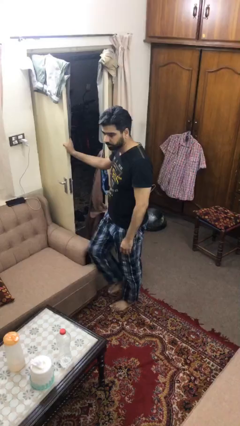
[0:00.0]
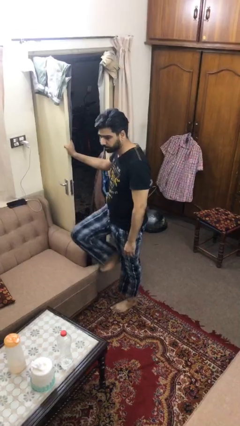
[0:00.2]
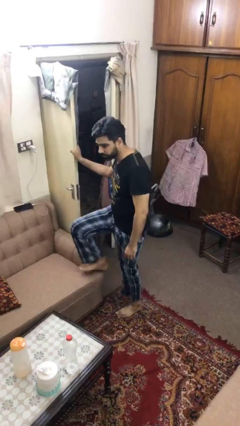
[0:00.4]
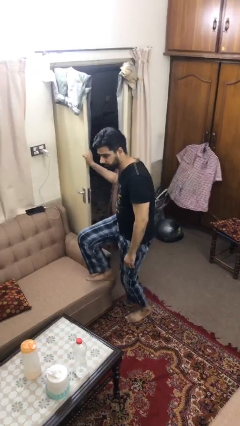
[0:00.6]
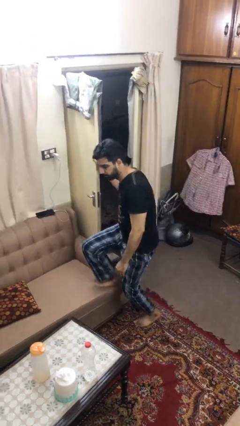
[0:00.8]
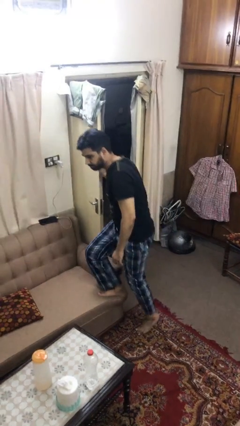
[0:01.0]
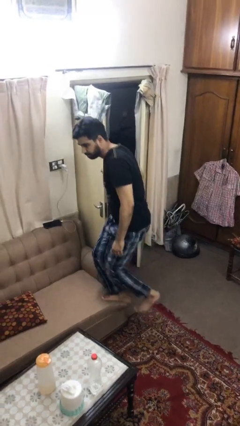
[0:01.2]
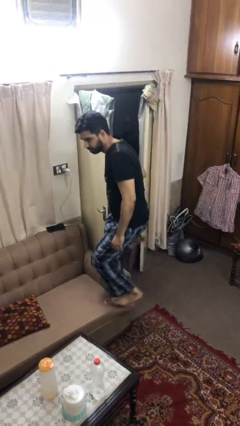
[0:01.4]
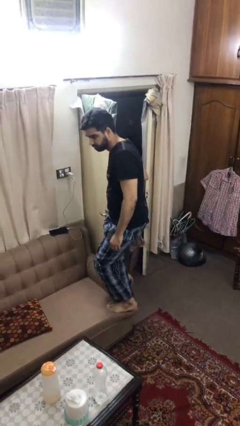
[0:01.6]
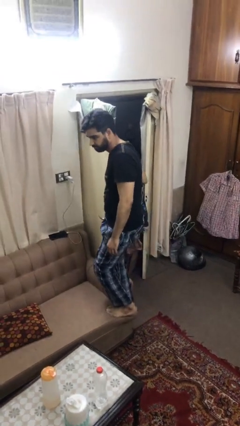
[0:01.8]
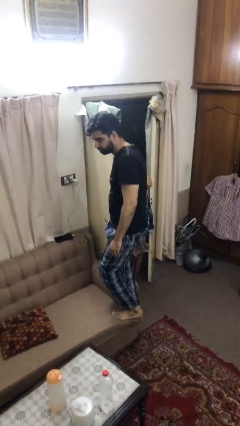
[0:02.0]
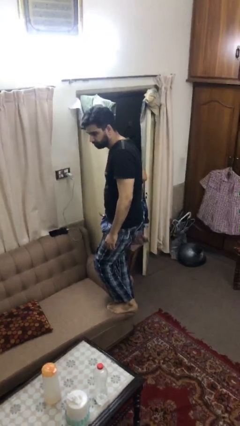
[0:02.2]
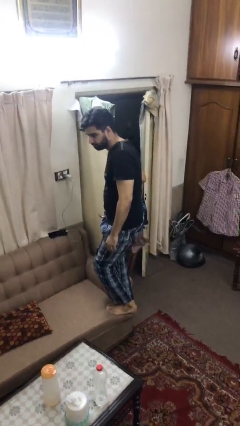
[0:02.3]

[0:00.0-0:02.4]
person climbs on couch

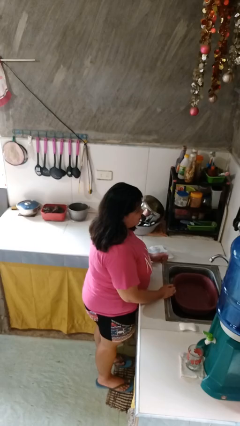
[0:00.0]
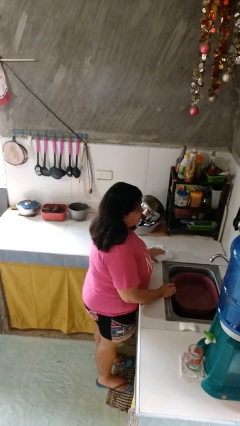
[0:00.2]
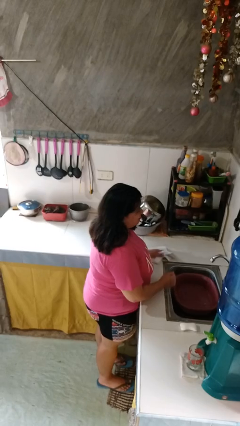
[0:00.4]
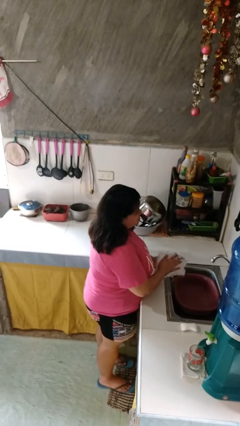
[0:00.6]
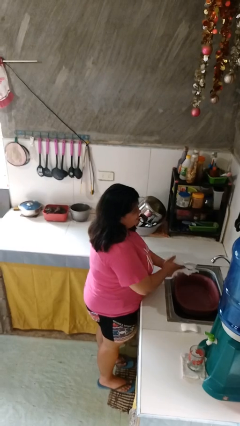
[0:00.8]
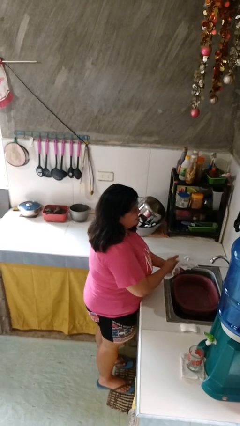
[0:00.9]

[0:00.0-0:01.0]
person dries hands with towel

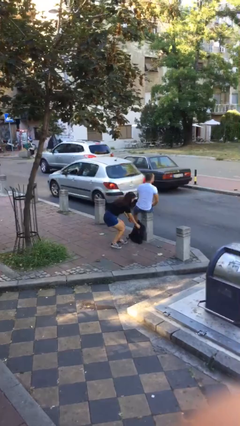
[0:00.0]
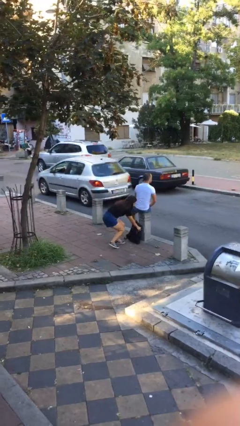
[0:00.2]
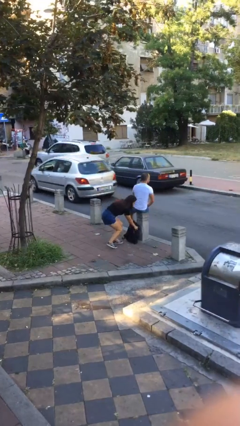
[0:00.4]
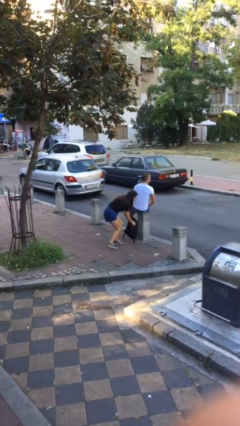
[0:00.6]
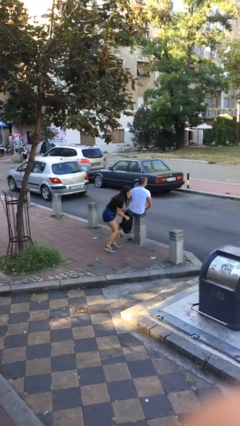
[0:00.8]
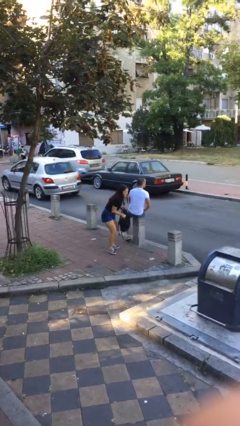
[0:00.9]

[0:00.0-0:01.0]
person steals object from person

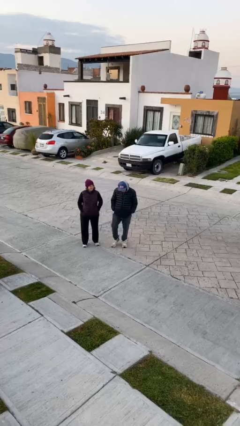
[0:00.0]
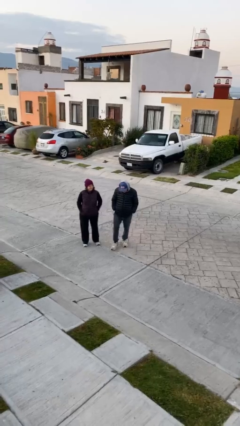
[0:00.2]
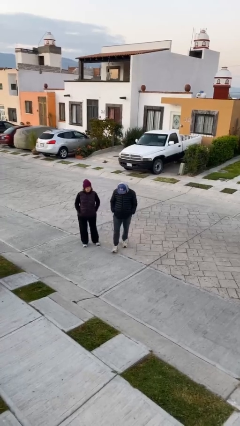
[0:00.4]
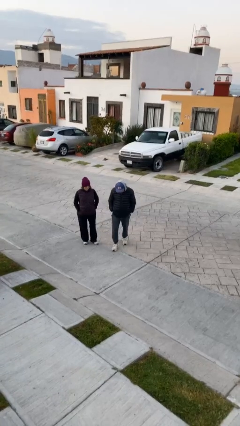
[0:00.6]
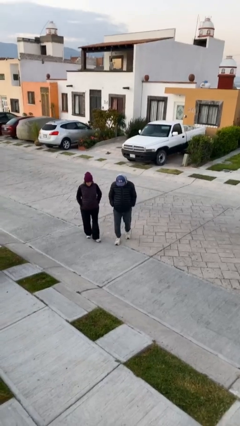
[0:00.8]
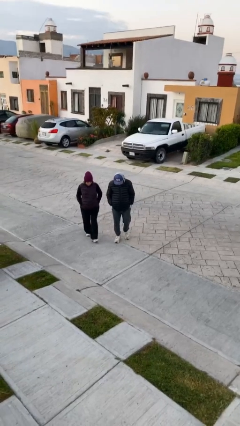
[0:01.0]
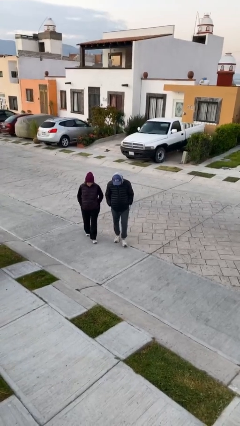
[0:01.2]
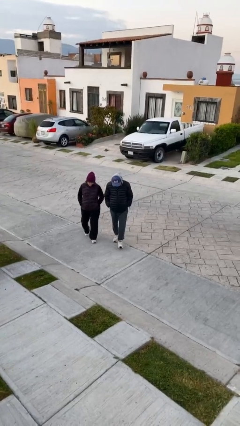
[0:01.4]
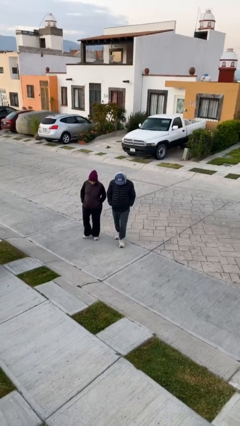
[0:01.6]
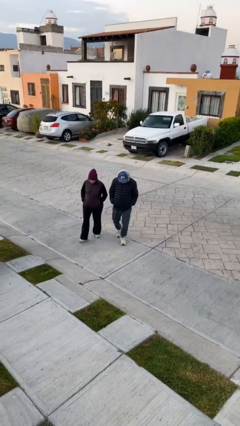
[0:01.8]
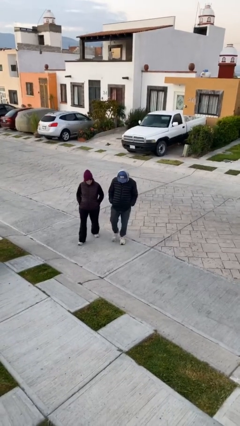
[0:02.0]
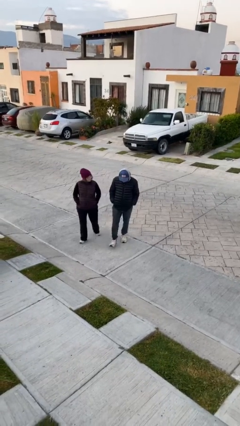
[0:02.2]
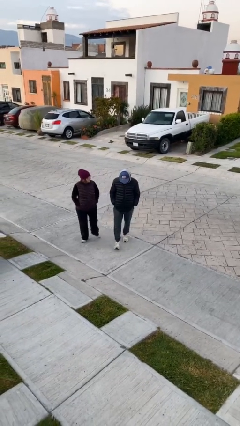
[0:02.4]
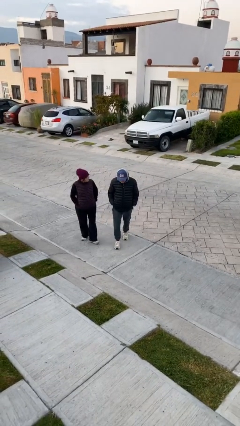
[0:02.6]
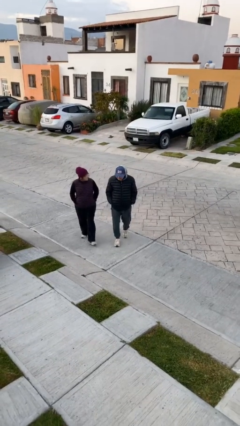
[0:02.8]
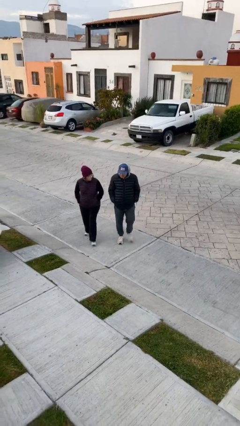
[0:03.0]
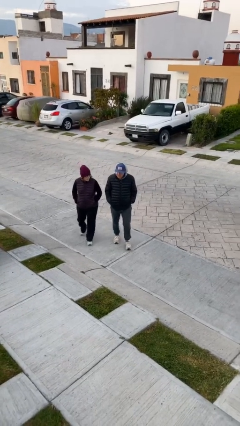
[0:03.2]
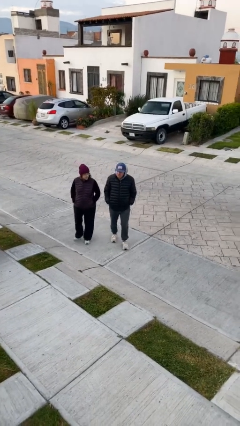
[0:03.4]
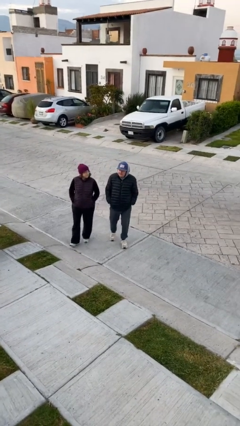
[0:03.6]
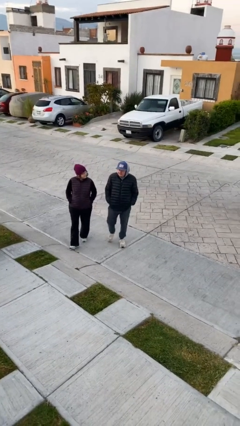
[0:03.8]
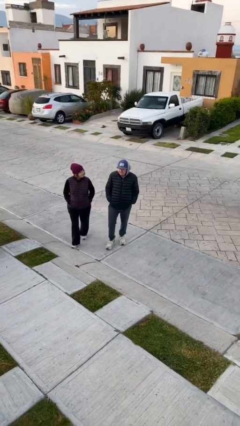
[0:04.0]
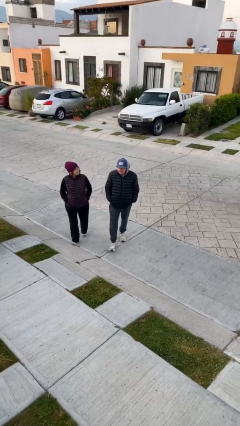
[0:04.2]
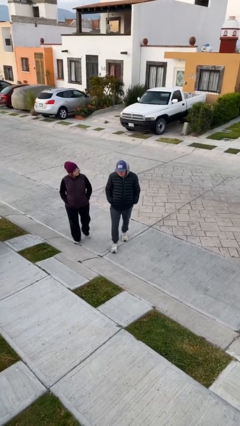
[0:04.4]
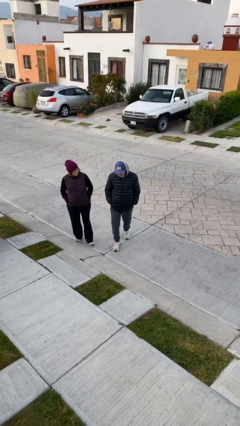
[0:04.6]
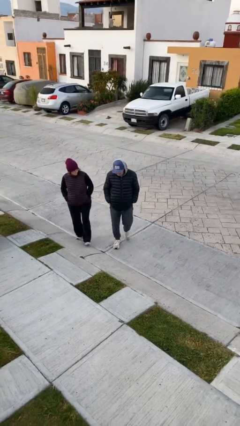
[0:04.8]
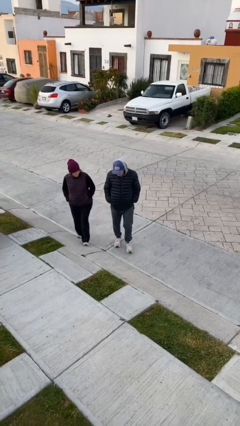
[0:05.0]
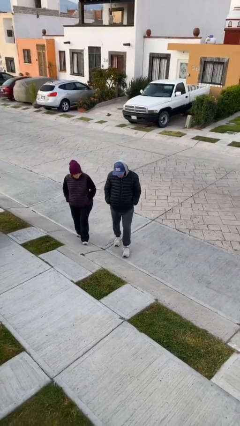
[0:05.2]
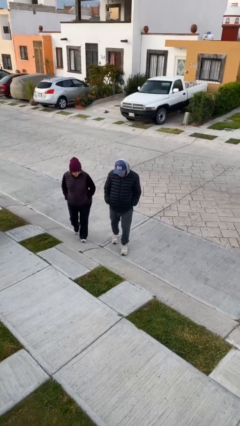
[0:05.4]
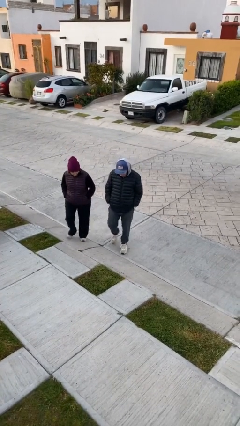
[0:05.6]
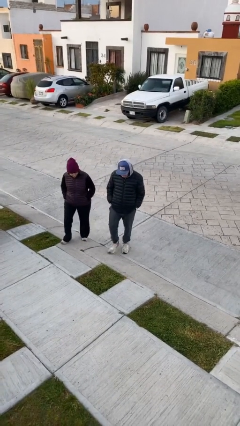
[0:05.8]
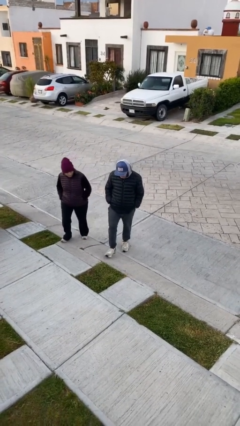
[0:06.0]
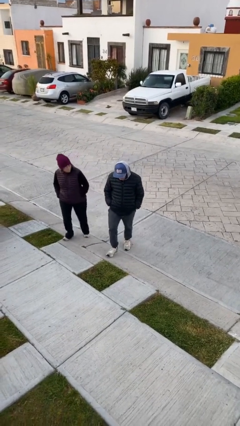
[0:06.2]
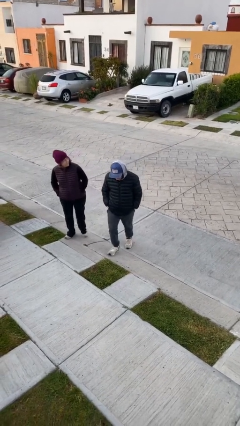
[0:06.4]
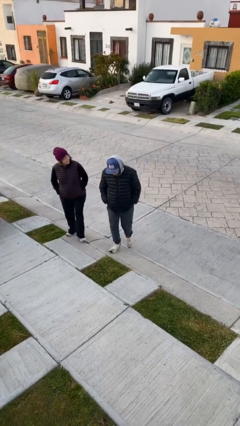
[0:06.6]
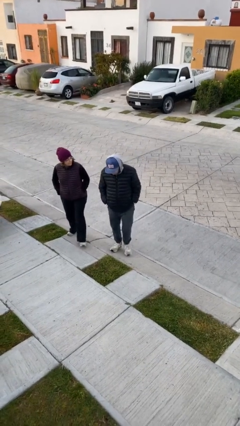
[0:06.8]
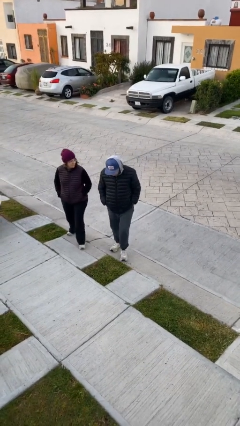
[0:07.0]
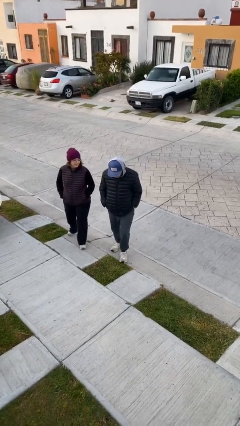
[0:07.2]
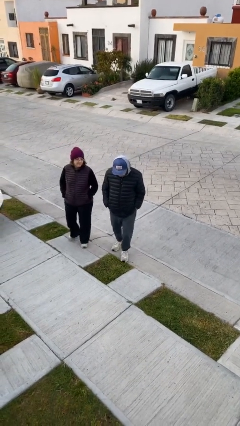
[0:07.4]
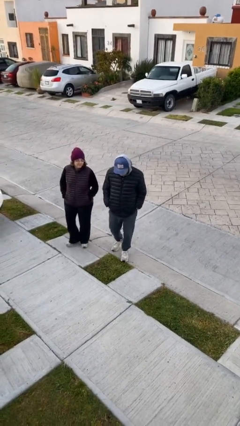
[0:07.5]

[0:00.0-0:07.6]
person talks to person

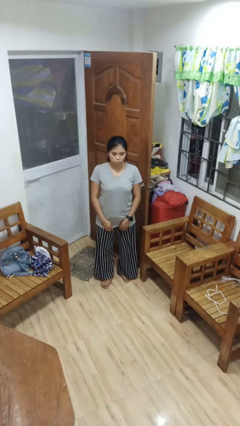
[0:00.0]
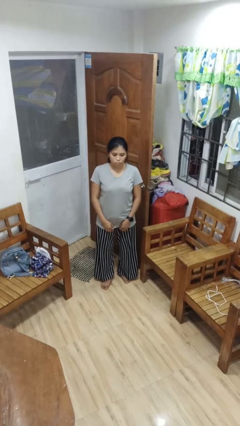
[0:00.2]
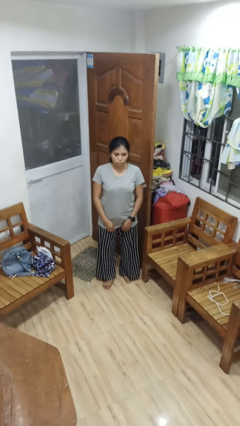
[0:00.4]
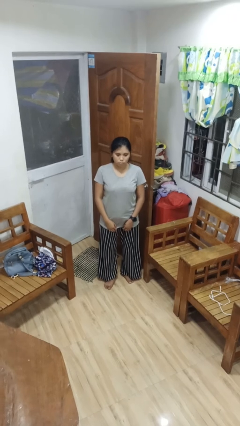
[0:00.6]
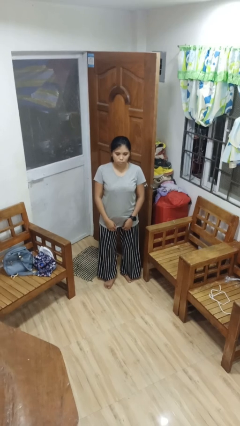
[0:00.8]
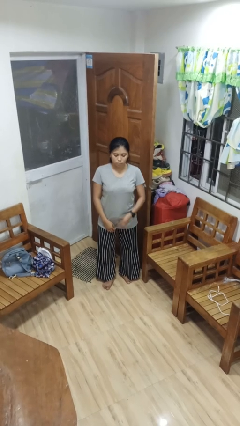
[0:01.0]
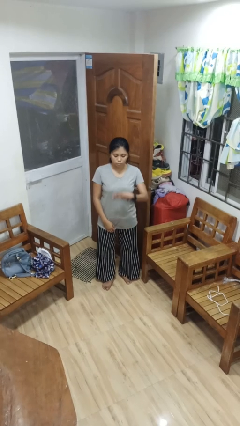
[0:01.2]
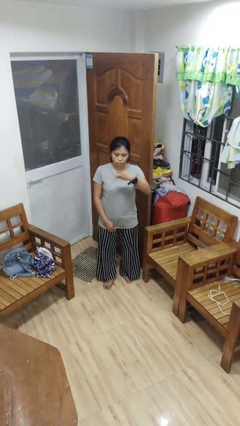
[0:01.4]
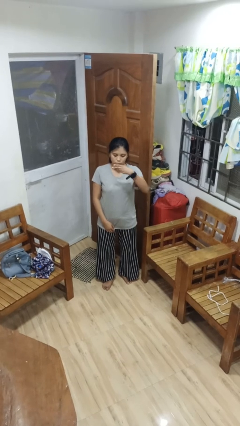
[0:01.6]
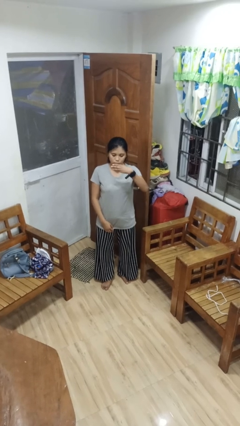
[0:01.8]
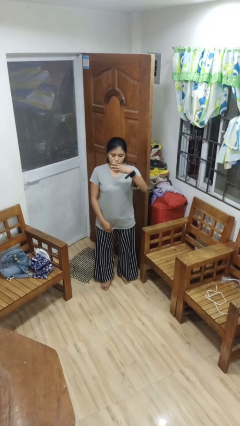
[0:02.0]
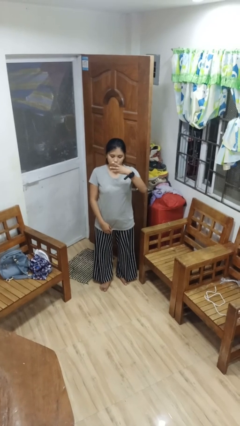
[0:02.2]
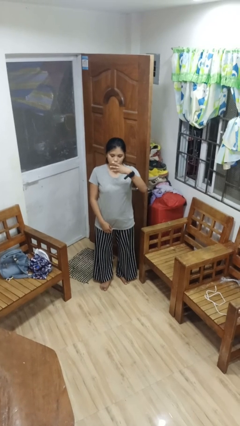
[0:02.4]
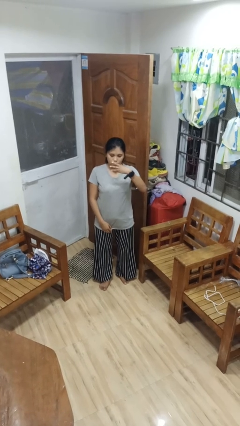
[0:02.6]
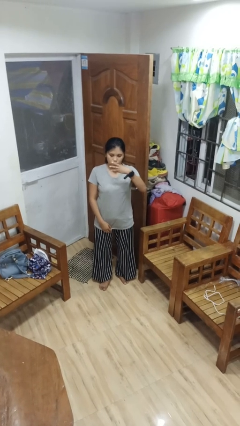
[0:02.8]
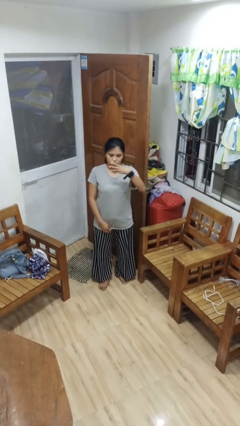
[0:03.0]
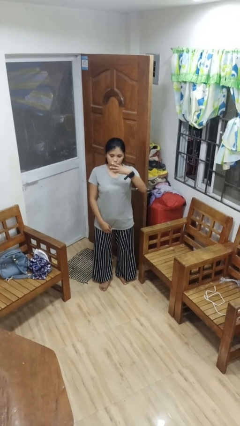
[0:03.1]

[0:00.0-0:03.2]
person gestures number three

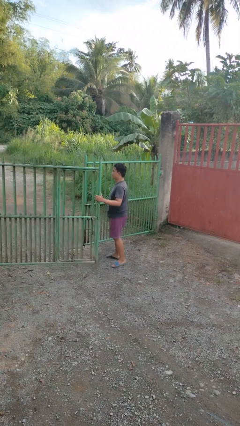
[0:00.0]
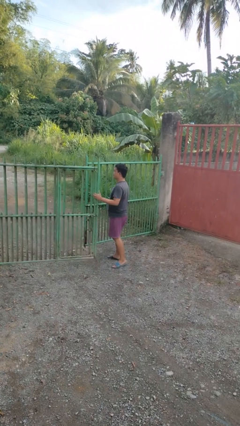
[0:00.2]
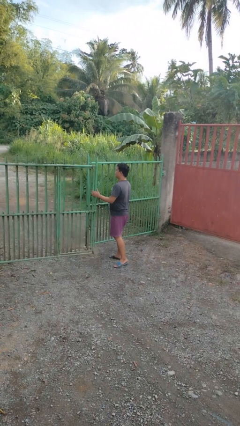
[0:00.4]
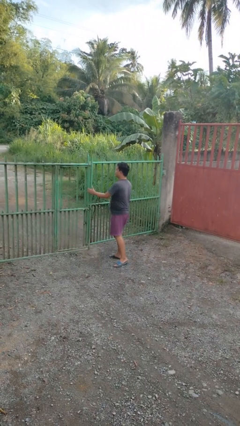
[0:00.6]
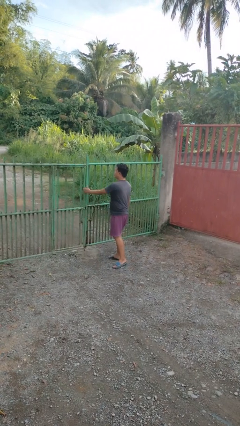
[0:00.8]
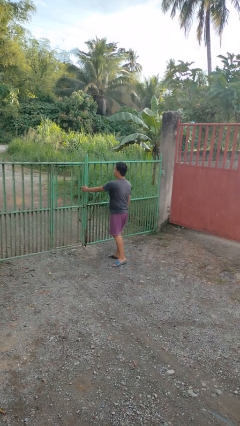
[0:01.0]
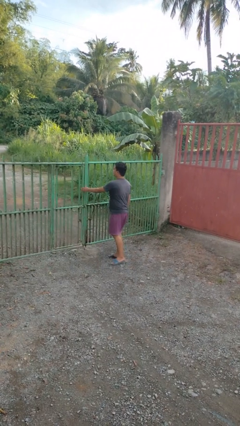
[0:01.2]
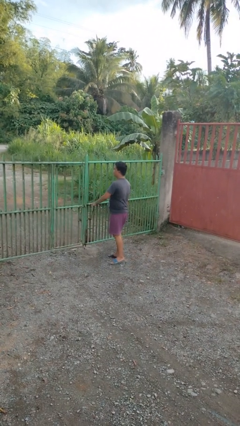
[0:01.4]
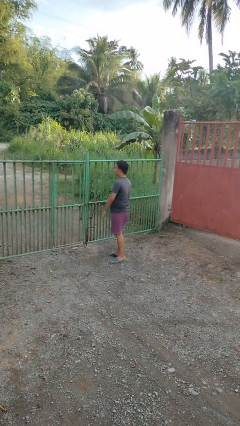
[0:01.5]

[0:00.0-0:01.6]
person closes gate

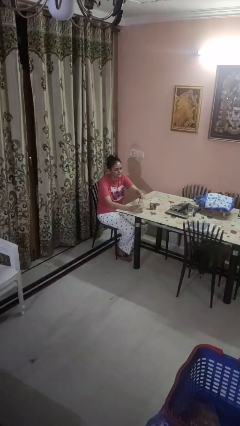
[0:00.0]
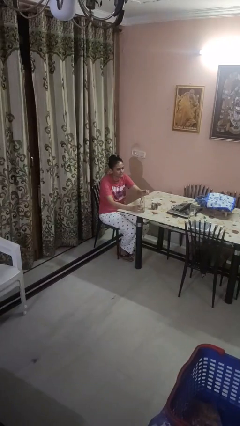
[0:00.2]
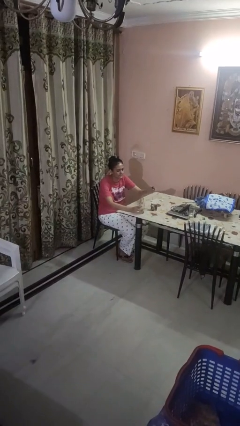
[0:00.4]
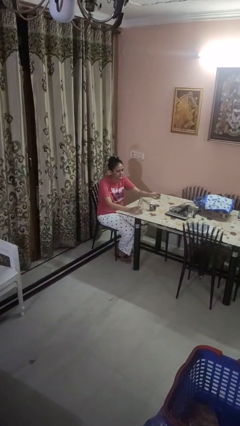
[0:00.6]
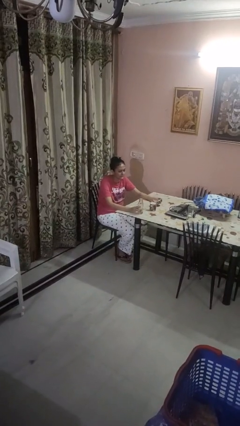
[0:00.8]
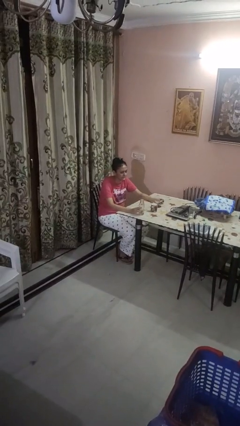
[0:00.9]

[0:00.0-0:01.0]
person unscrews lid from bottle
